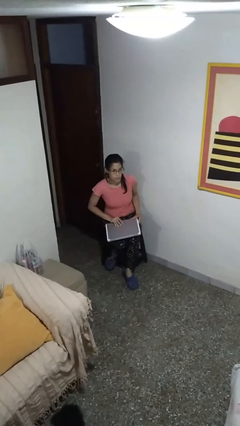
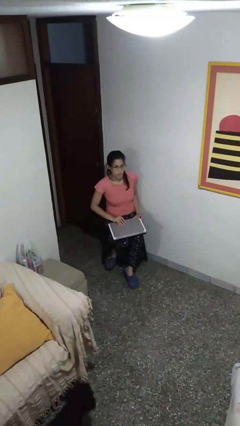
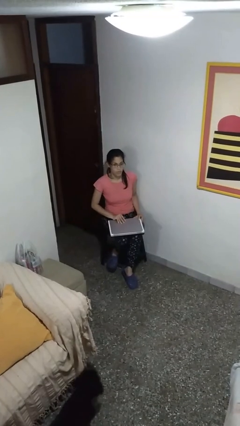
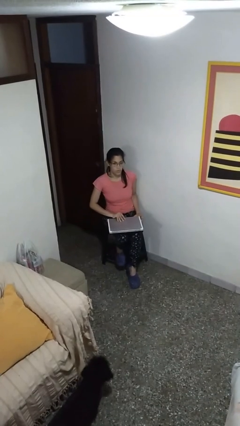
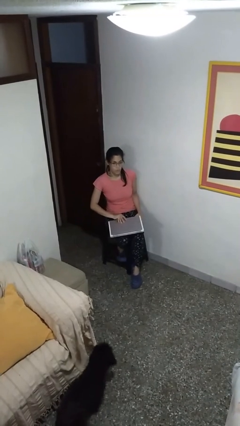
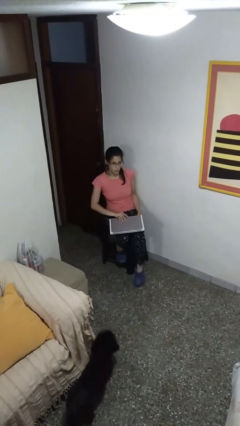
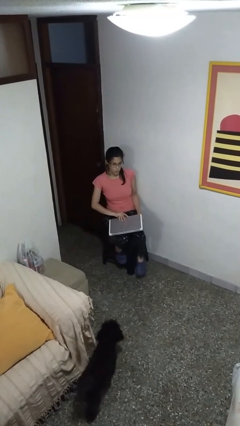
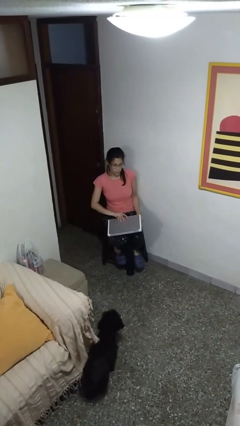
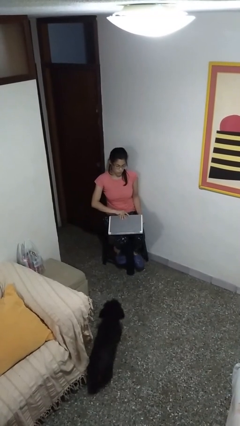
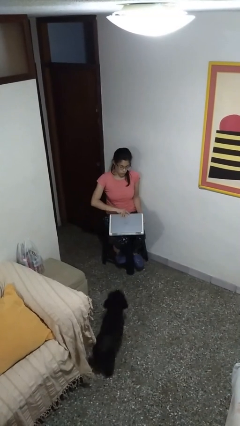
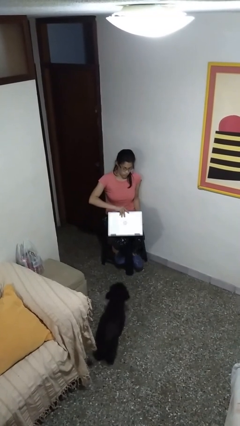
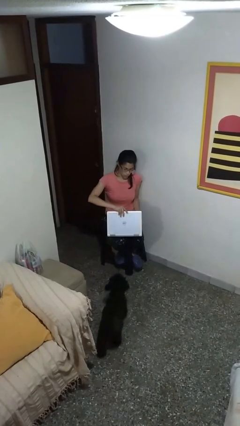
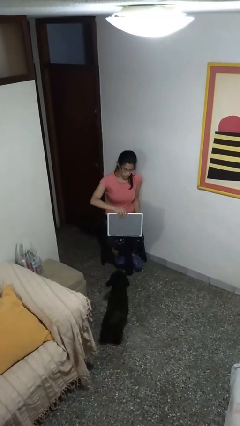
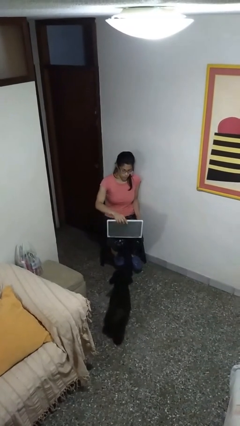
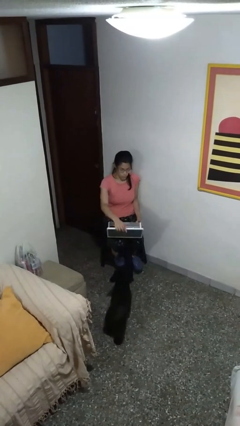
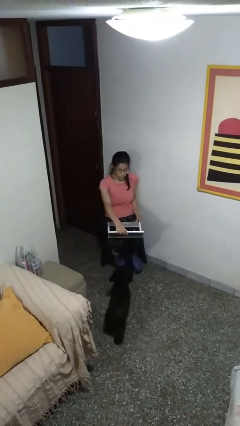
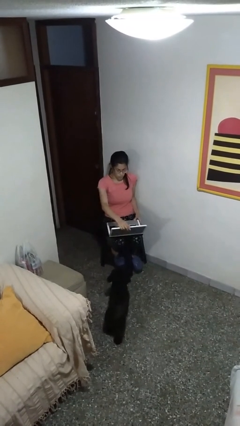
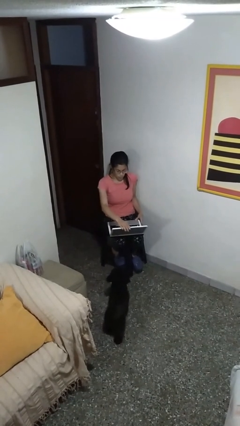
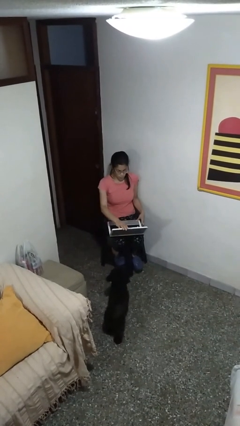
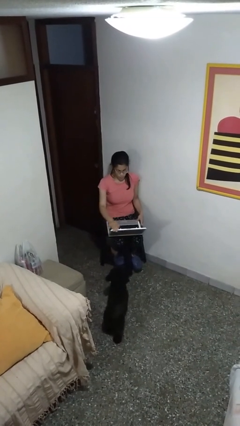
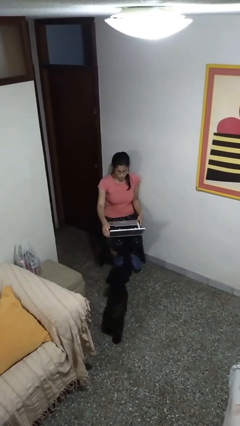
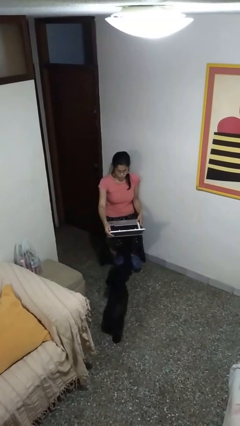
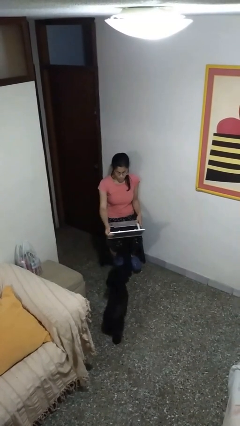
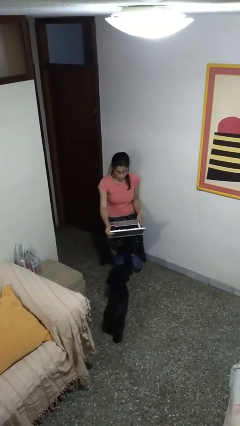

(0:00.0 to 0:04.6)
person opens laptop

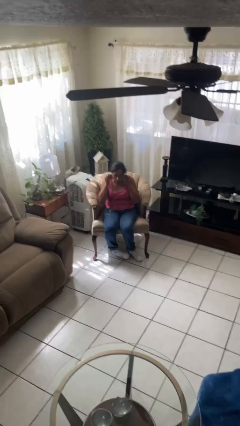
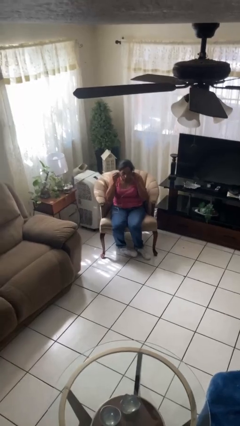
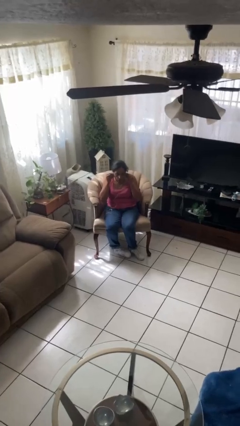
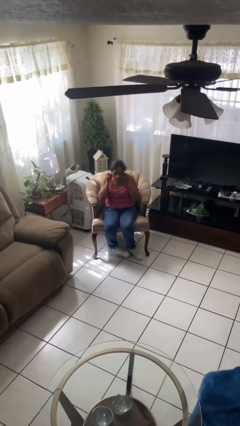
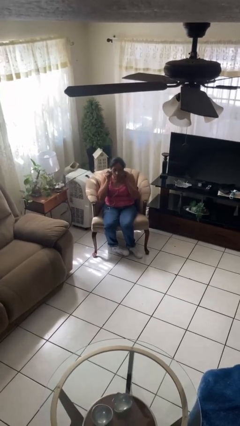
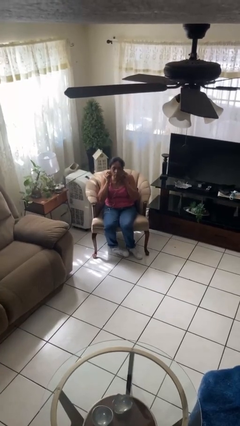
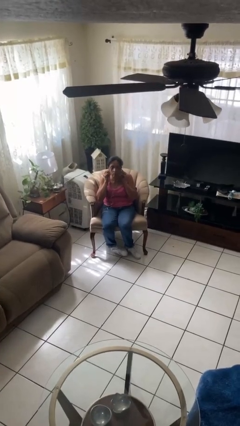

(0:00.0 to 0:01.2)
person puts on headphones

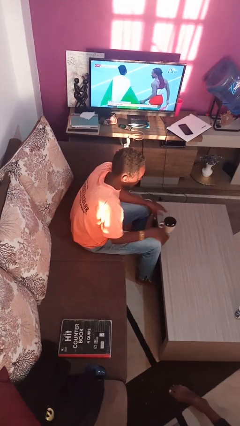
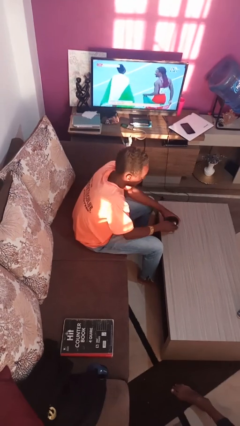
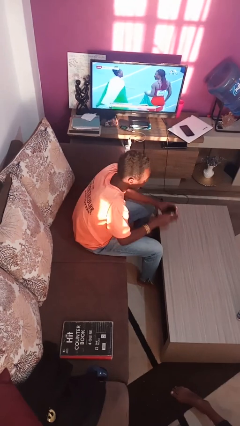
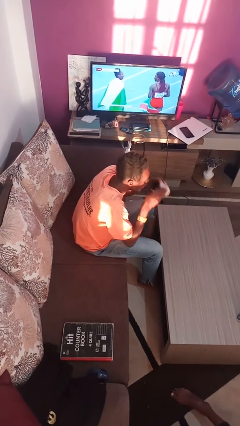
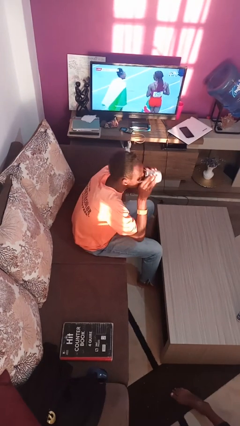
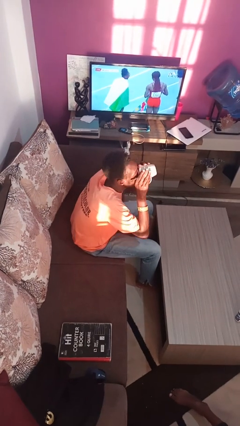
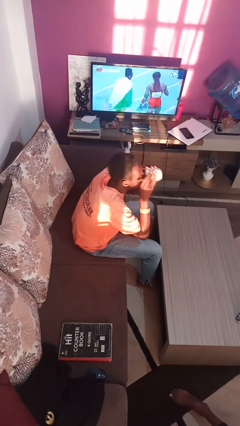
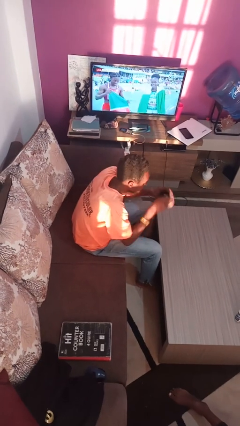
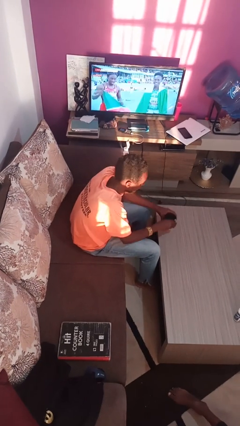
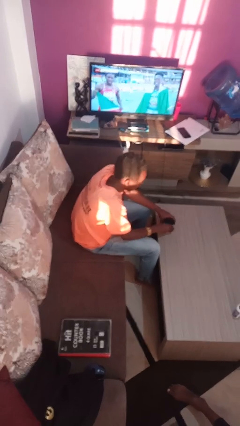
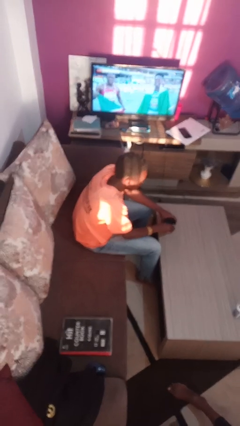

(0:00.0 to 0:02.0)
person drinks from mug

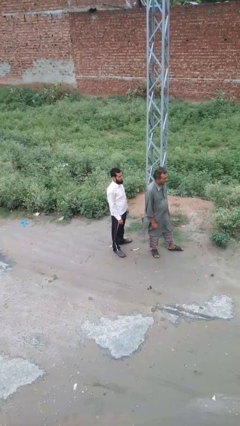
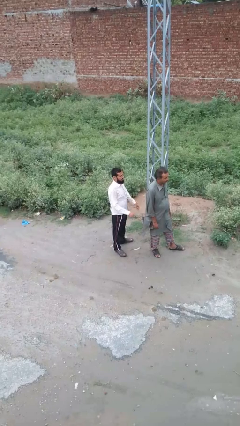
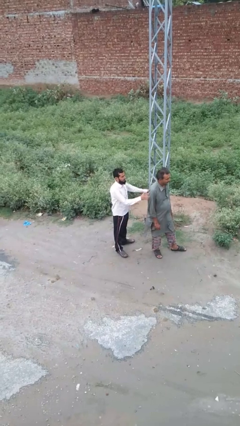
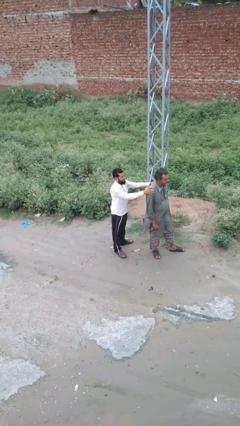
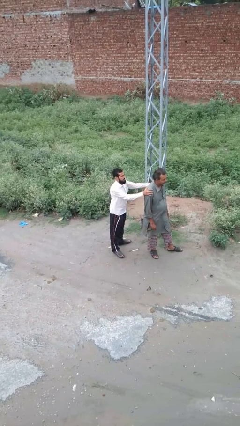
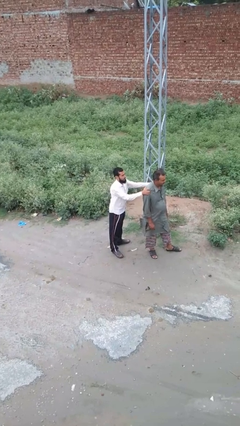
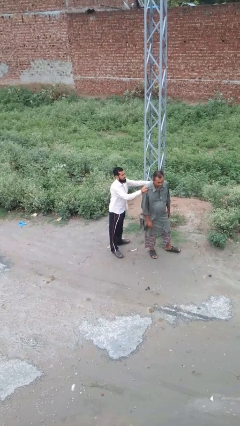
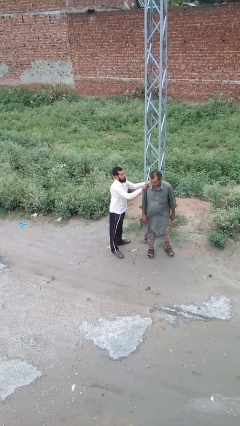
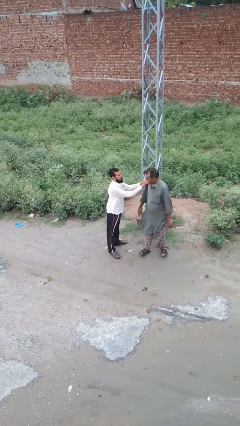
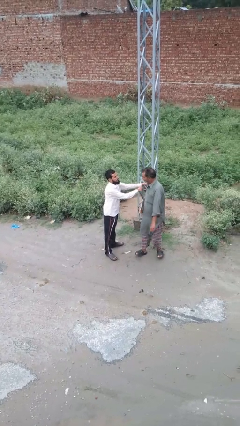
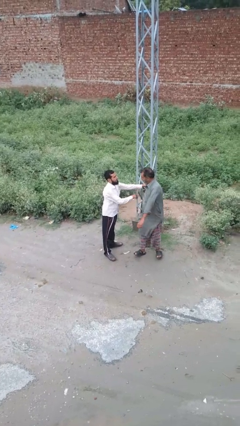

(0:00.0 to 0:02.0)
person grabs person by shoulder

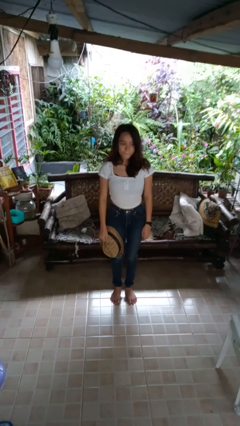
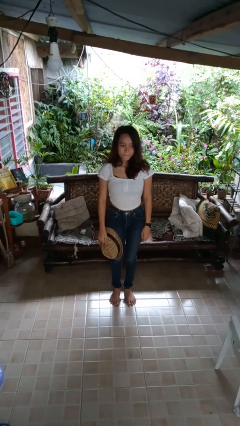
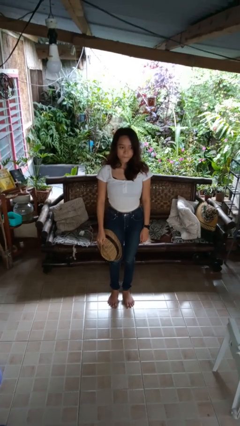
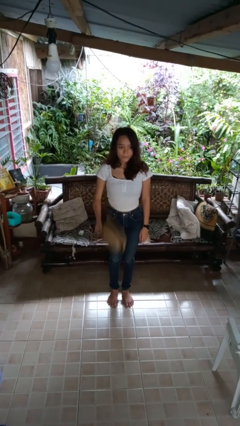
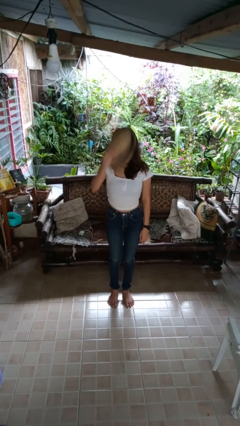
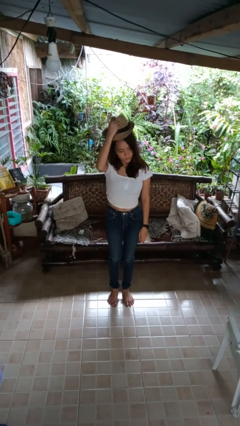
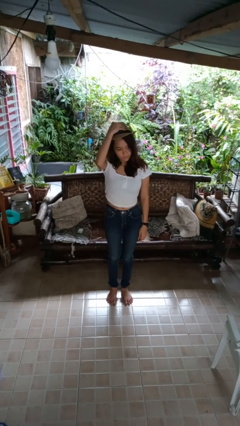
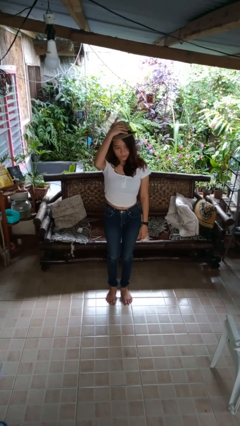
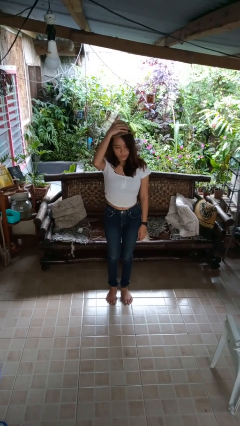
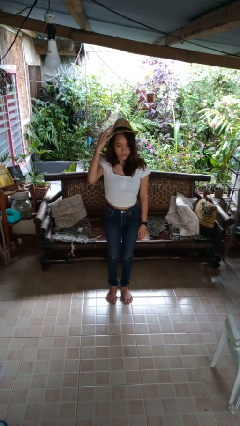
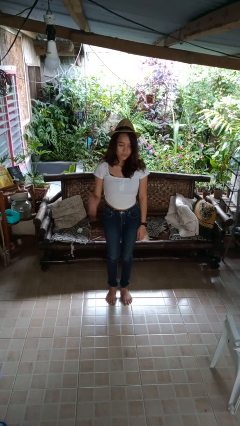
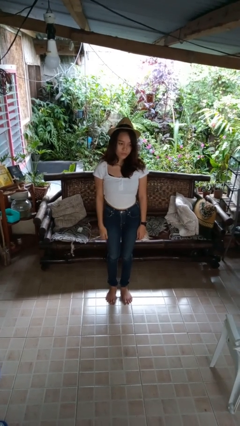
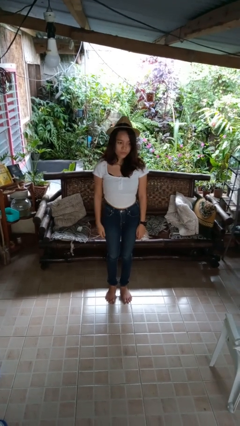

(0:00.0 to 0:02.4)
person puts on hat

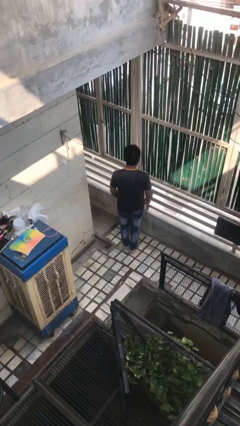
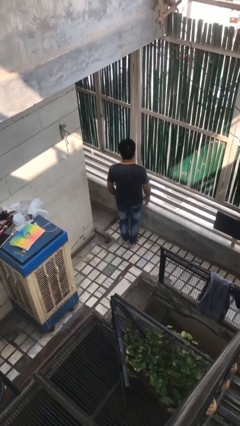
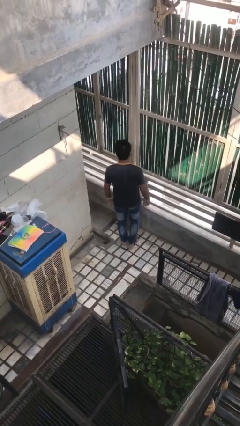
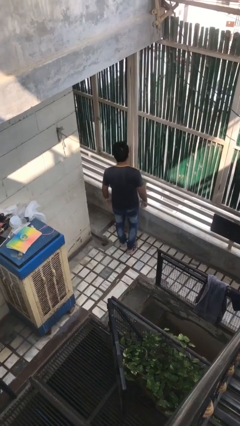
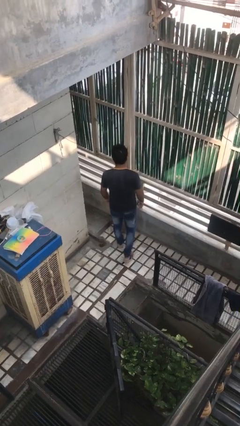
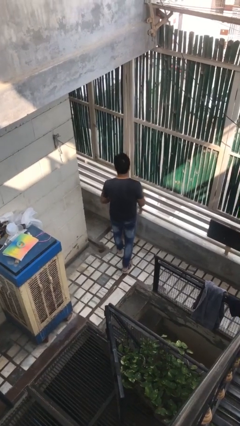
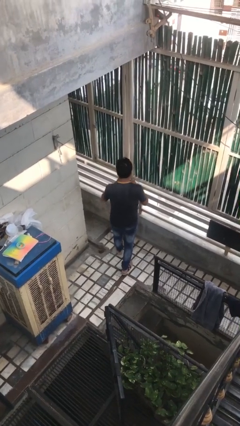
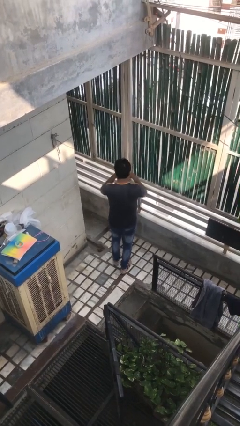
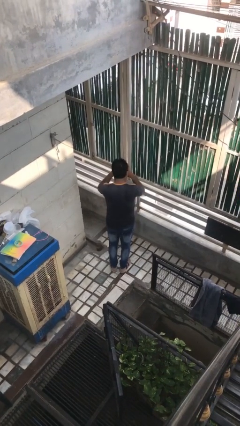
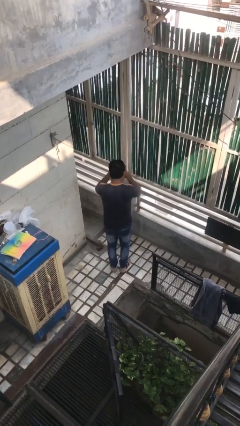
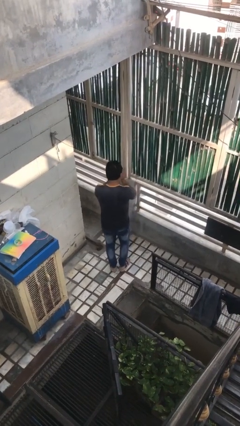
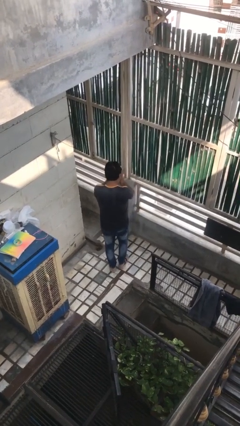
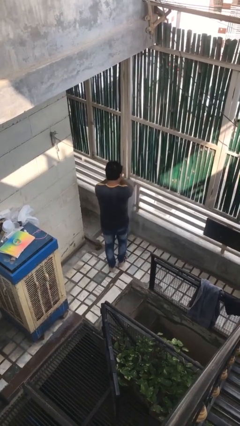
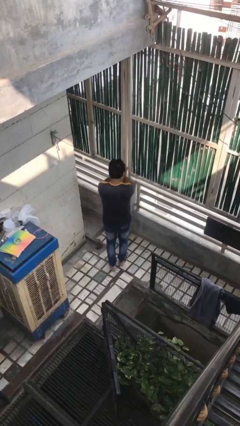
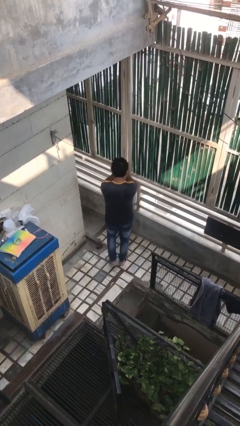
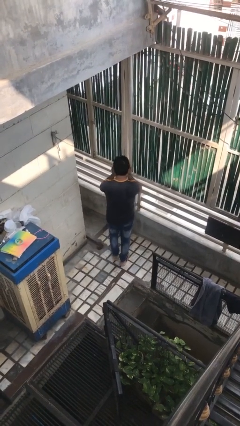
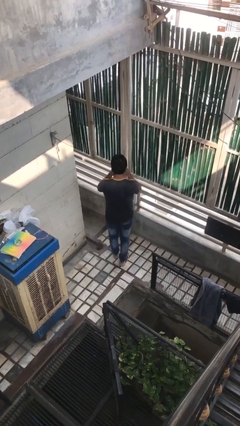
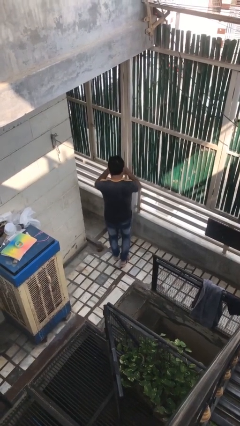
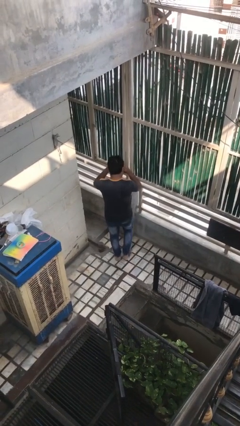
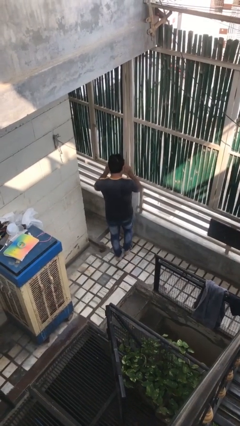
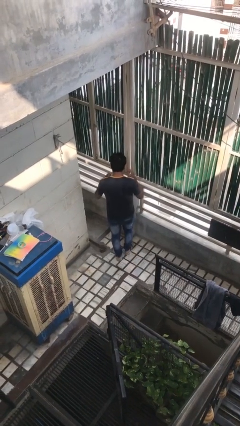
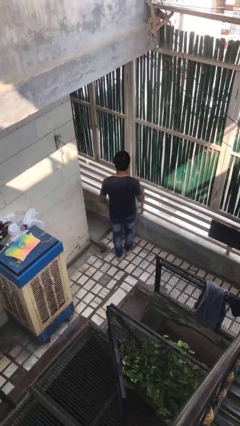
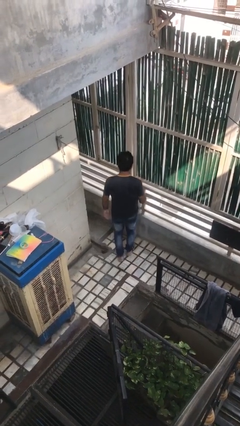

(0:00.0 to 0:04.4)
person rubs eyes

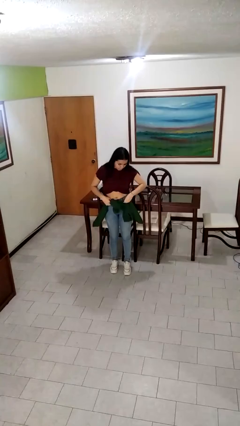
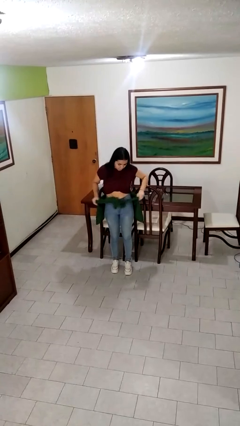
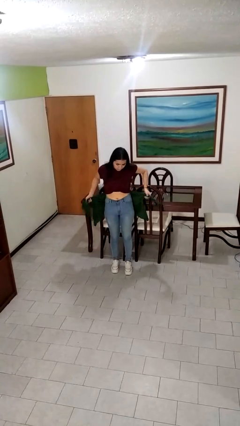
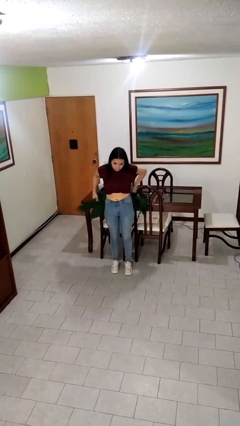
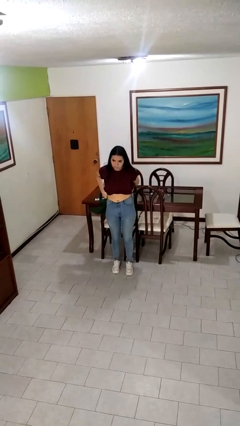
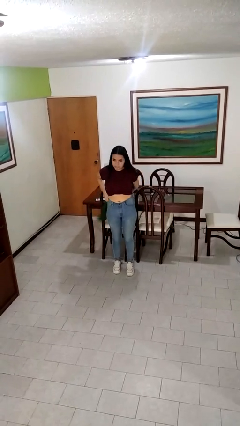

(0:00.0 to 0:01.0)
person unties jacket around waist
